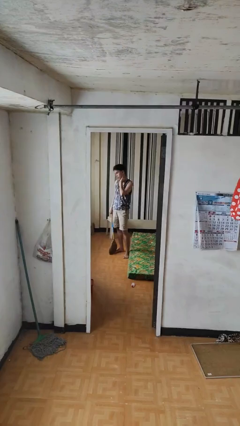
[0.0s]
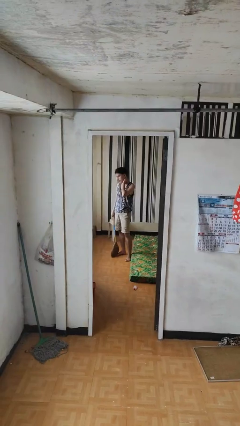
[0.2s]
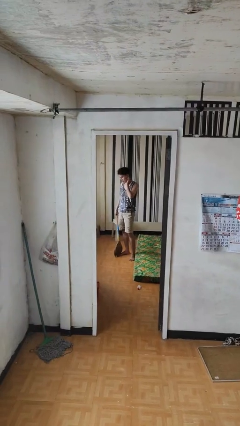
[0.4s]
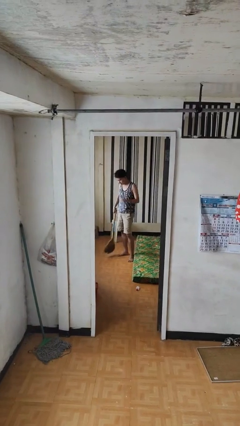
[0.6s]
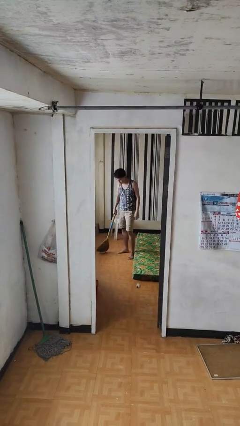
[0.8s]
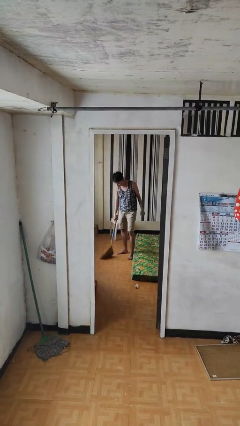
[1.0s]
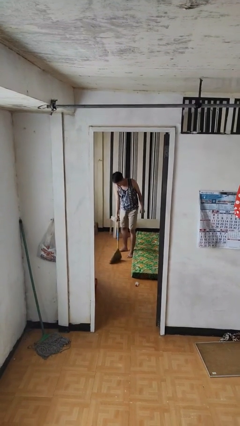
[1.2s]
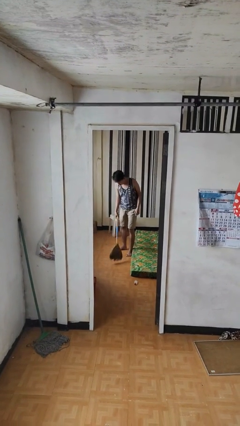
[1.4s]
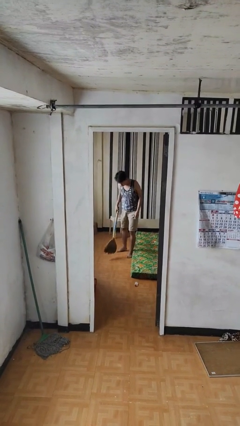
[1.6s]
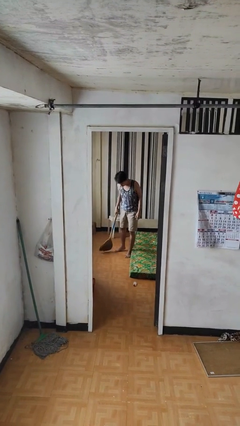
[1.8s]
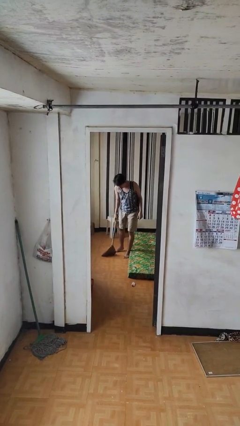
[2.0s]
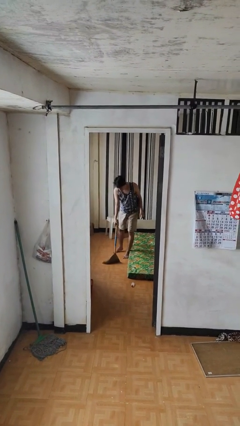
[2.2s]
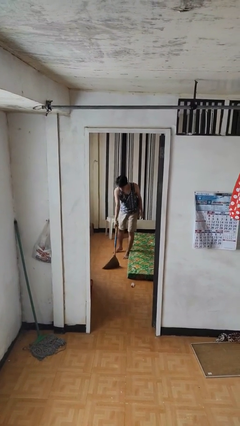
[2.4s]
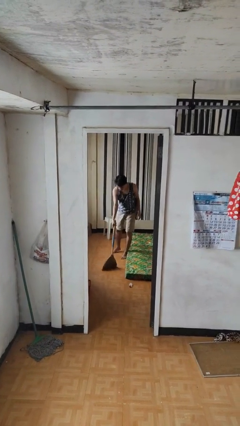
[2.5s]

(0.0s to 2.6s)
person sweeps floor

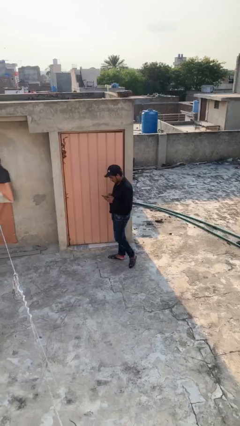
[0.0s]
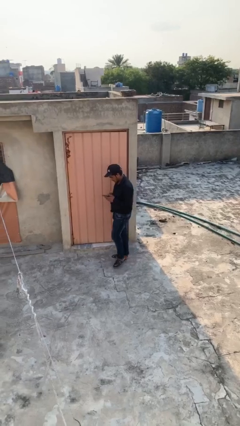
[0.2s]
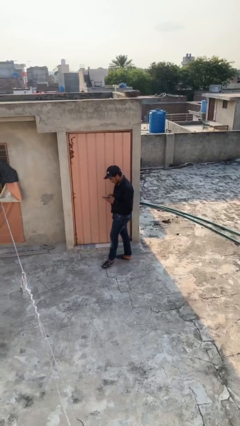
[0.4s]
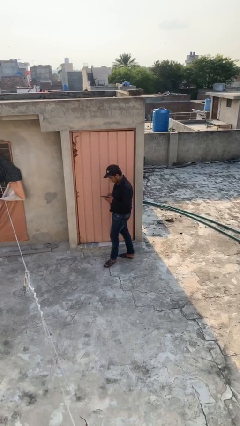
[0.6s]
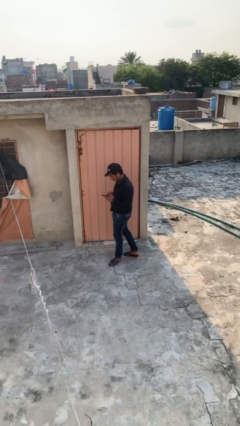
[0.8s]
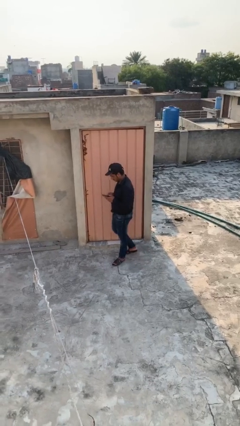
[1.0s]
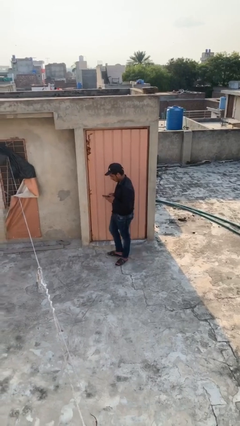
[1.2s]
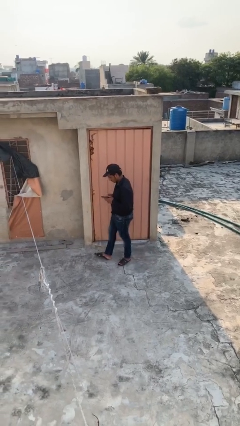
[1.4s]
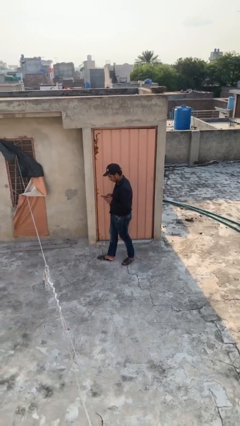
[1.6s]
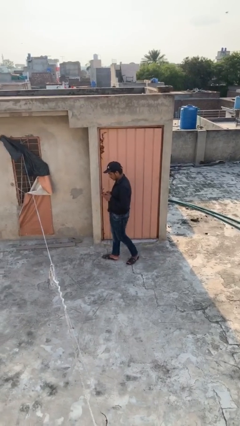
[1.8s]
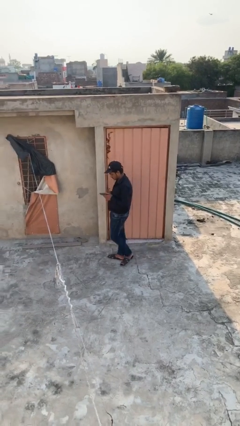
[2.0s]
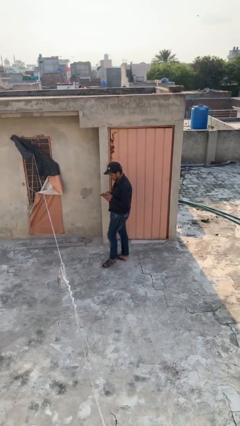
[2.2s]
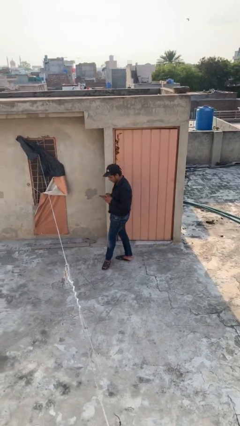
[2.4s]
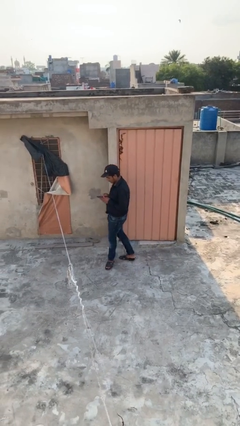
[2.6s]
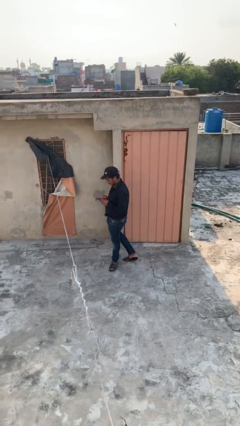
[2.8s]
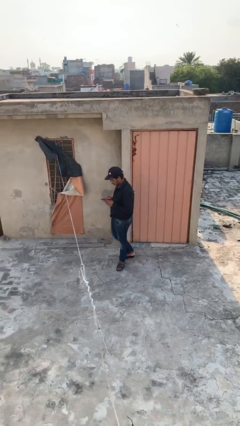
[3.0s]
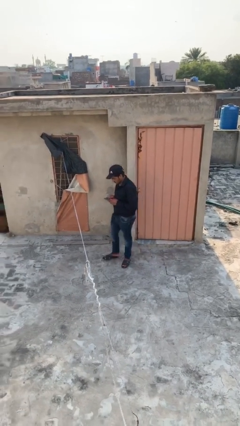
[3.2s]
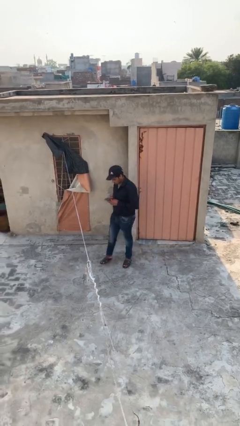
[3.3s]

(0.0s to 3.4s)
person texts on phone

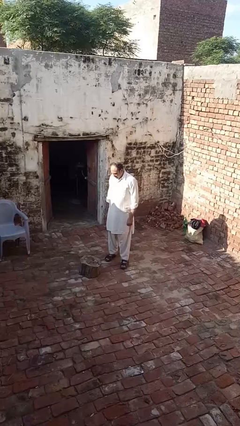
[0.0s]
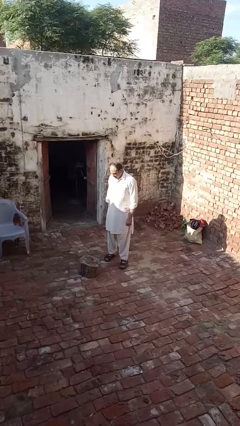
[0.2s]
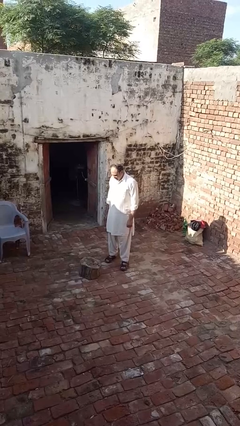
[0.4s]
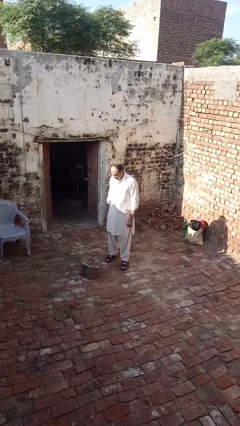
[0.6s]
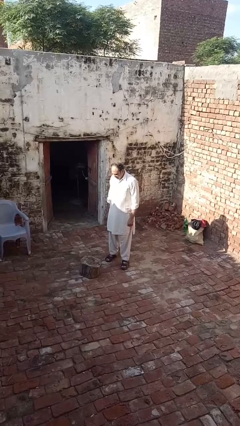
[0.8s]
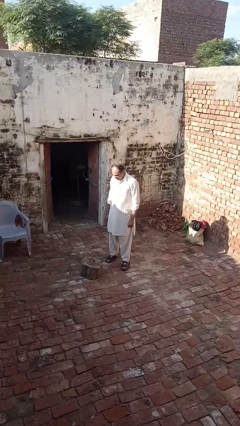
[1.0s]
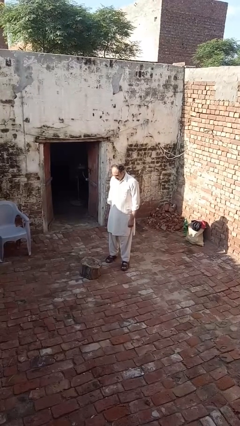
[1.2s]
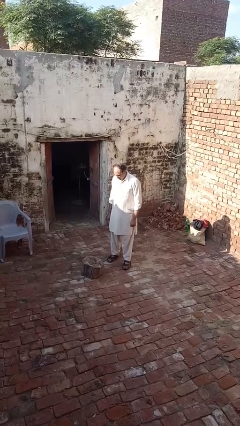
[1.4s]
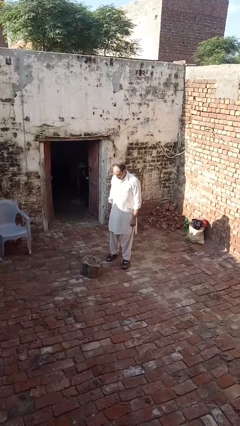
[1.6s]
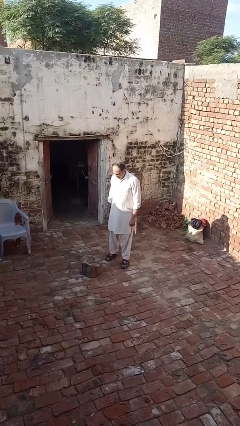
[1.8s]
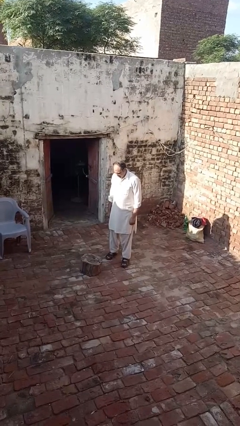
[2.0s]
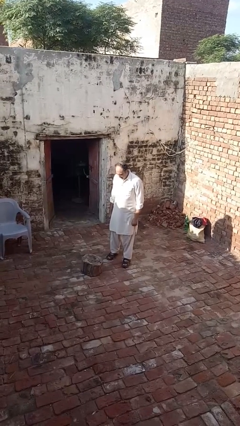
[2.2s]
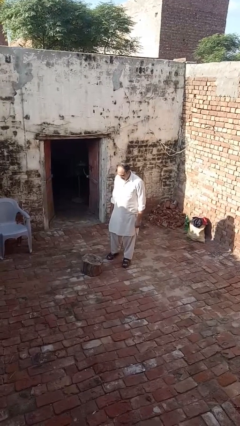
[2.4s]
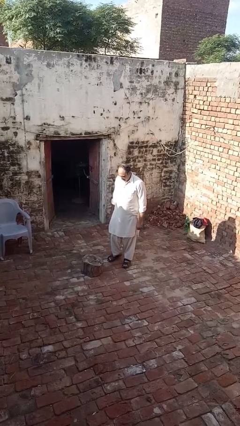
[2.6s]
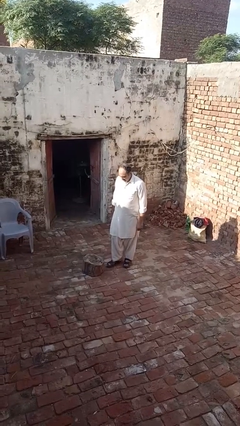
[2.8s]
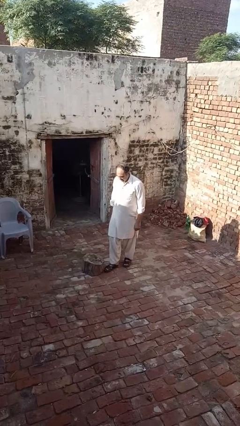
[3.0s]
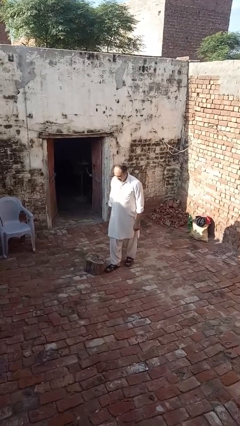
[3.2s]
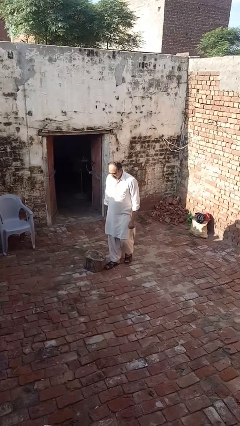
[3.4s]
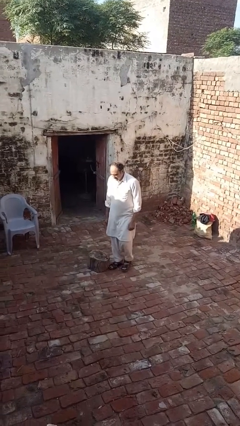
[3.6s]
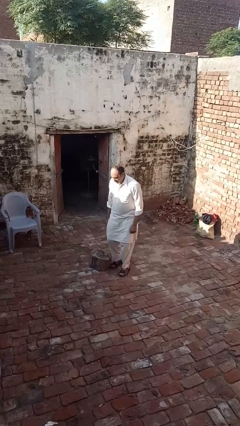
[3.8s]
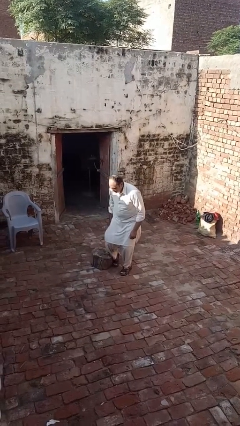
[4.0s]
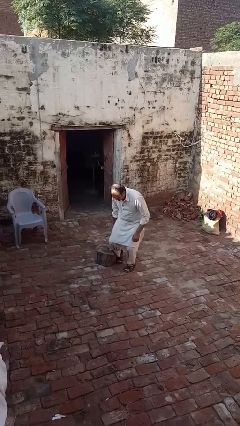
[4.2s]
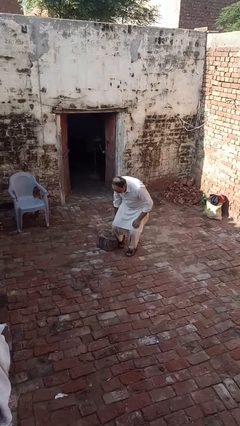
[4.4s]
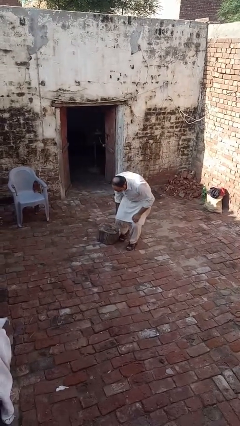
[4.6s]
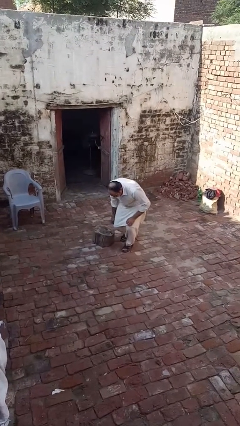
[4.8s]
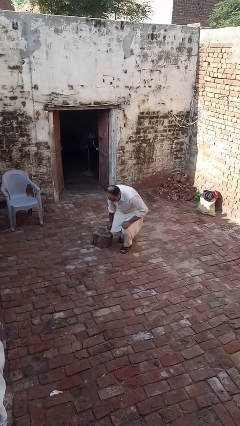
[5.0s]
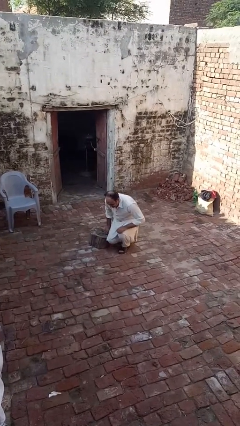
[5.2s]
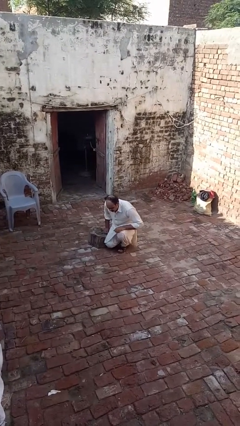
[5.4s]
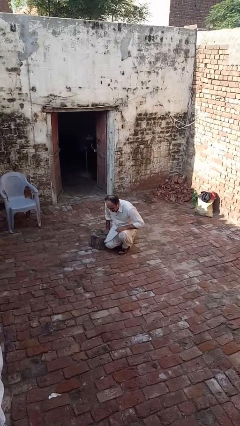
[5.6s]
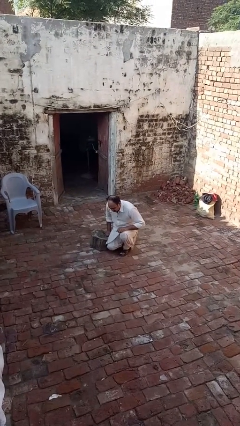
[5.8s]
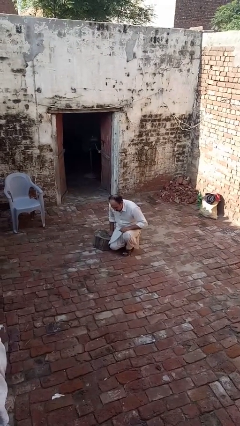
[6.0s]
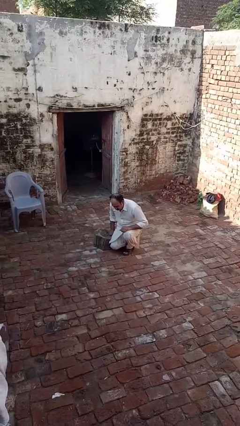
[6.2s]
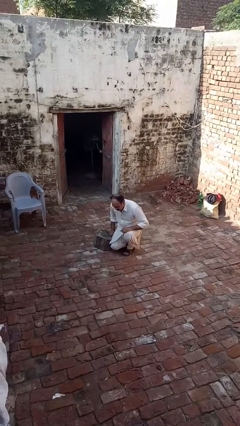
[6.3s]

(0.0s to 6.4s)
person trips on object on floor

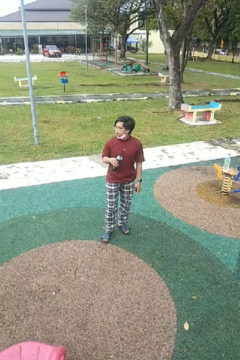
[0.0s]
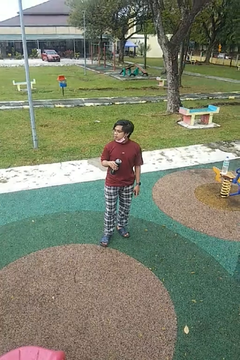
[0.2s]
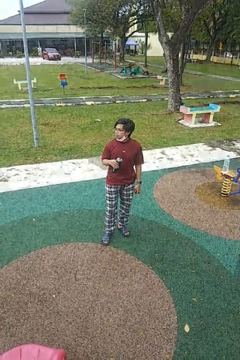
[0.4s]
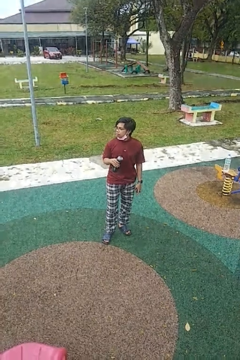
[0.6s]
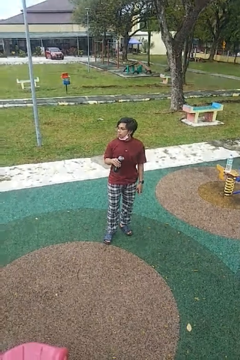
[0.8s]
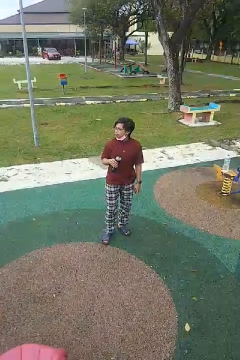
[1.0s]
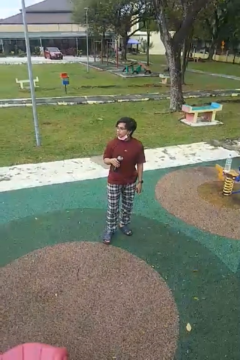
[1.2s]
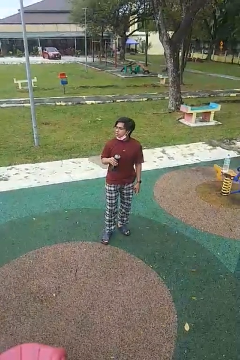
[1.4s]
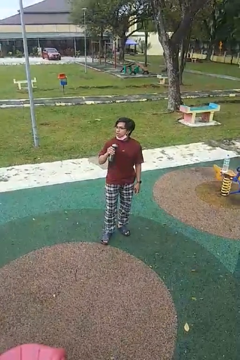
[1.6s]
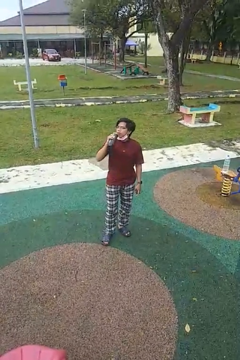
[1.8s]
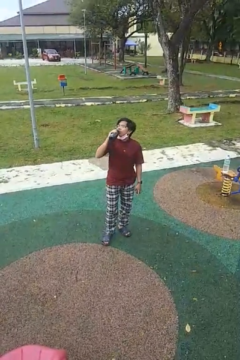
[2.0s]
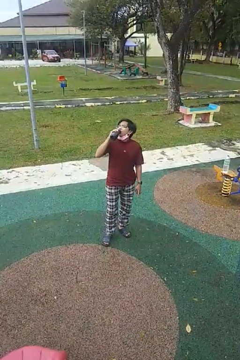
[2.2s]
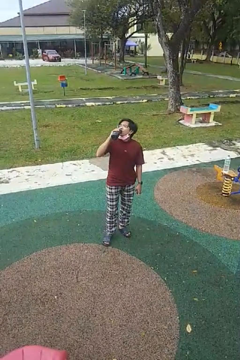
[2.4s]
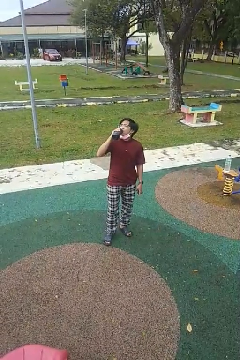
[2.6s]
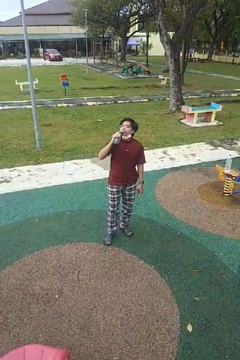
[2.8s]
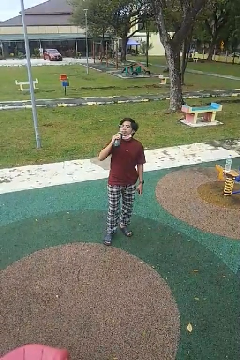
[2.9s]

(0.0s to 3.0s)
person drinks from bottle

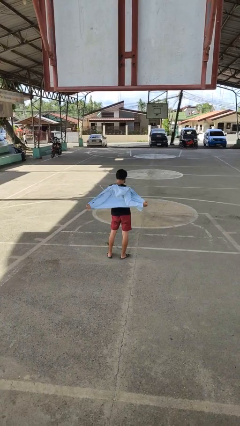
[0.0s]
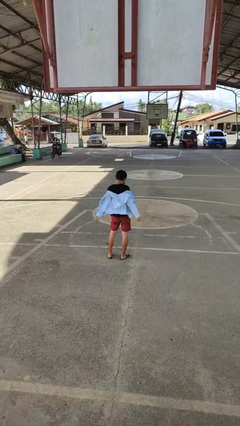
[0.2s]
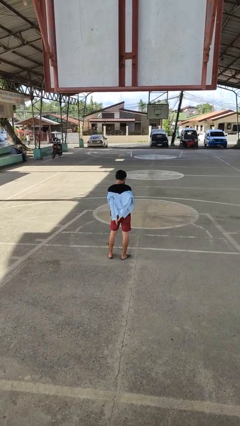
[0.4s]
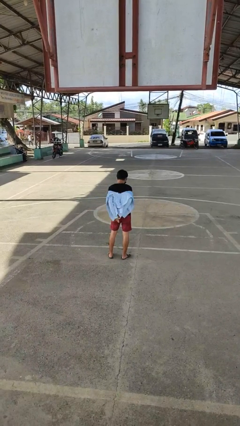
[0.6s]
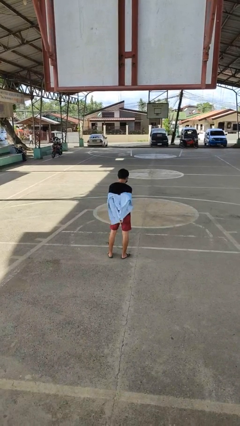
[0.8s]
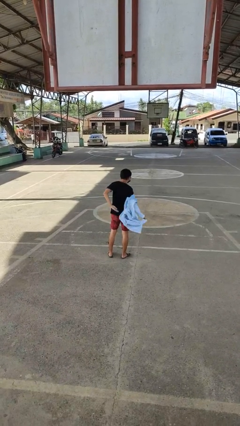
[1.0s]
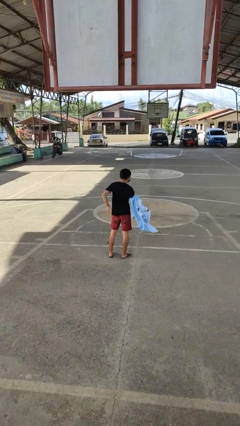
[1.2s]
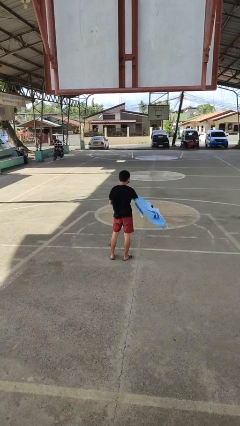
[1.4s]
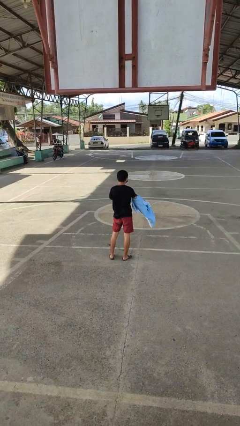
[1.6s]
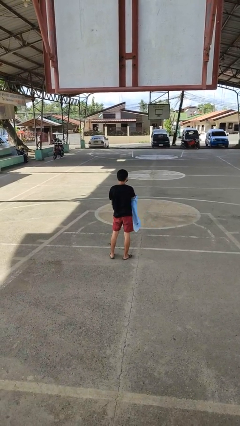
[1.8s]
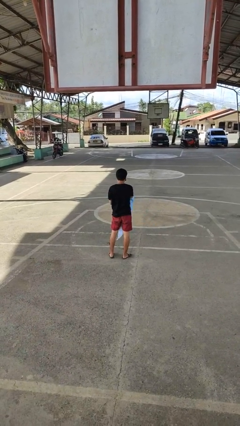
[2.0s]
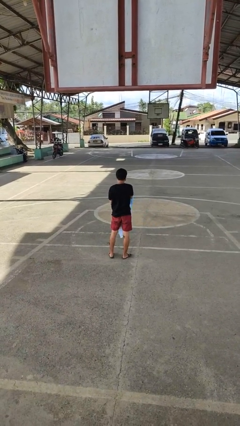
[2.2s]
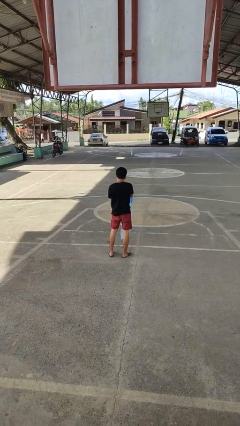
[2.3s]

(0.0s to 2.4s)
person takes off jacket

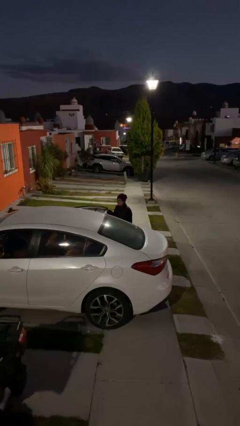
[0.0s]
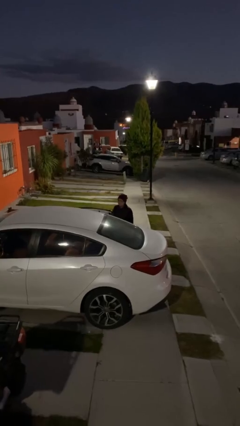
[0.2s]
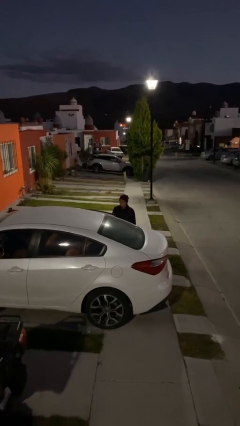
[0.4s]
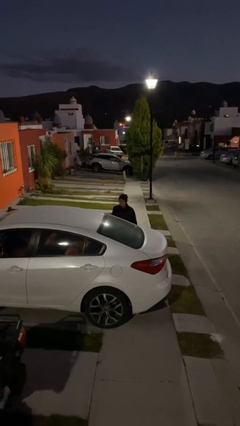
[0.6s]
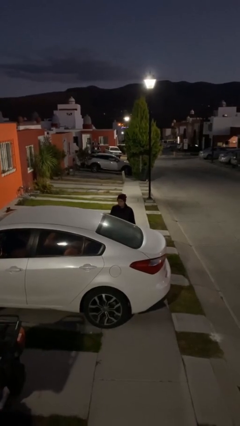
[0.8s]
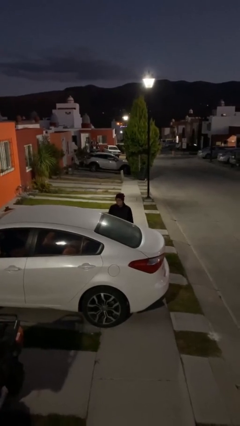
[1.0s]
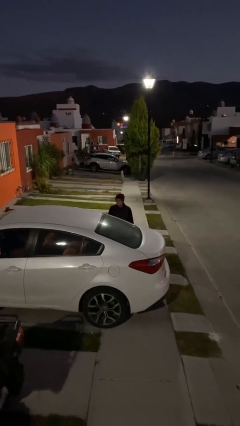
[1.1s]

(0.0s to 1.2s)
person closes car door
